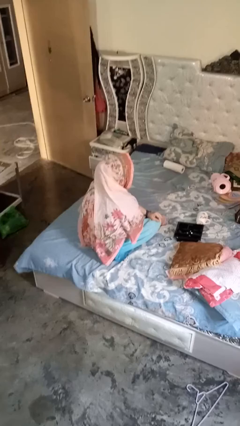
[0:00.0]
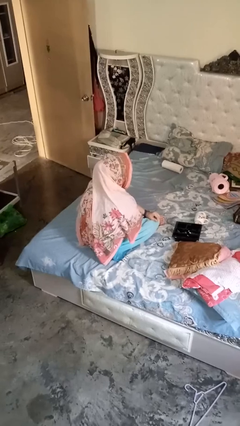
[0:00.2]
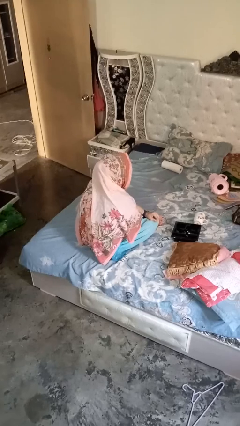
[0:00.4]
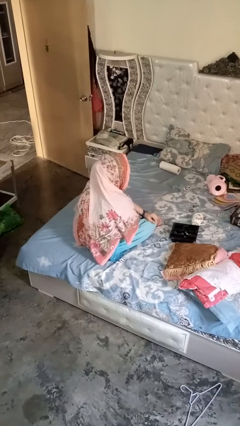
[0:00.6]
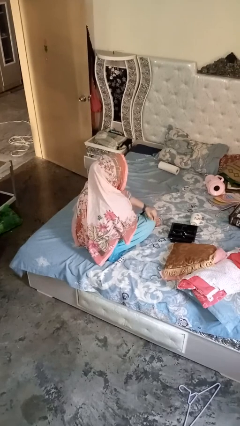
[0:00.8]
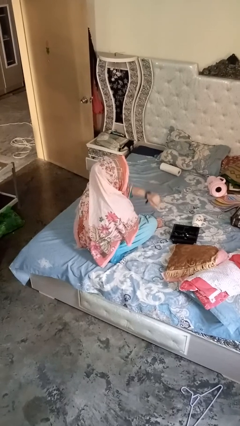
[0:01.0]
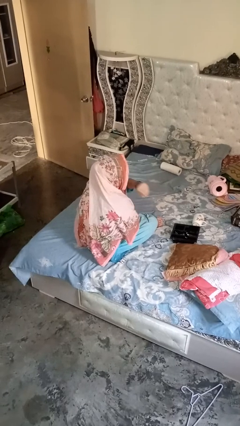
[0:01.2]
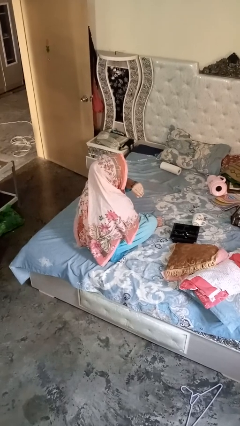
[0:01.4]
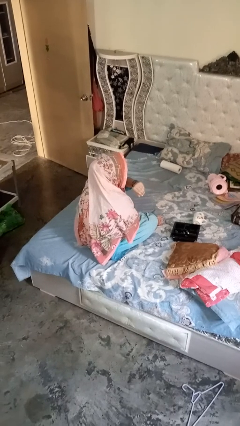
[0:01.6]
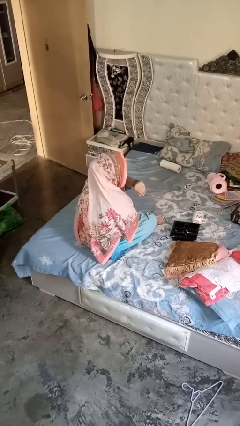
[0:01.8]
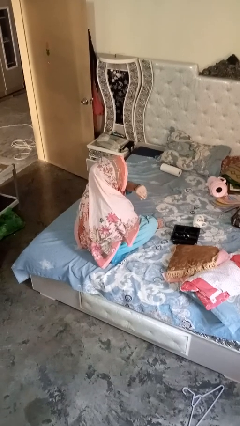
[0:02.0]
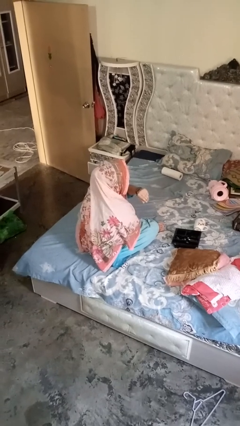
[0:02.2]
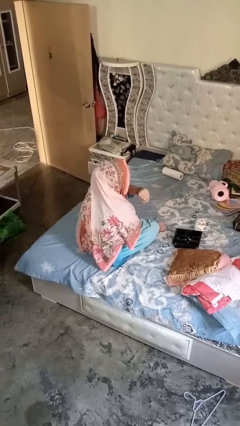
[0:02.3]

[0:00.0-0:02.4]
person gestures watch closely

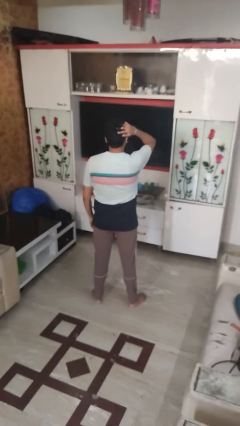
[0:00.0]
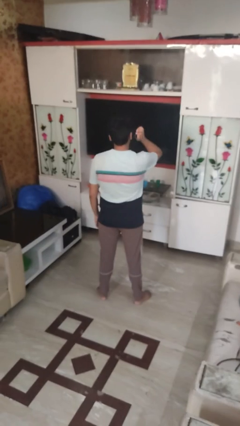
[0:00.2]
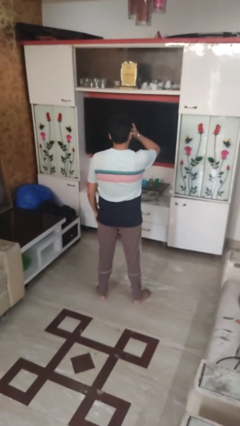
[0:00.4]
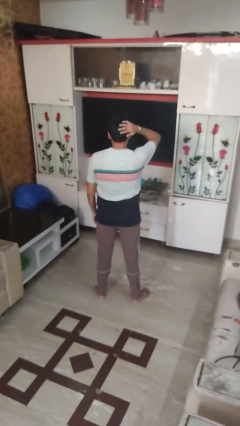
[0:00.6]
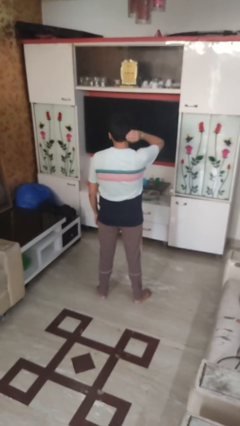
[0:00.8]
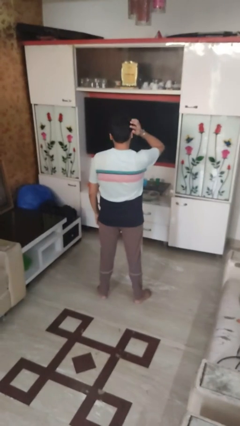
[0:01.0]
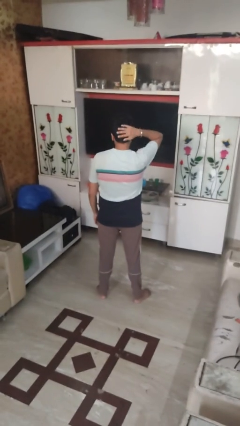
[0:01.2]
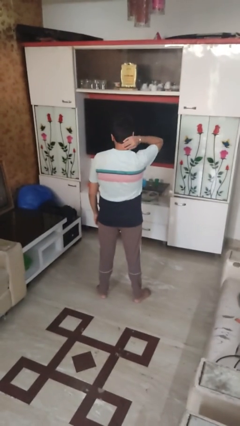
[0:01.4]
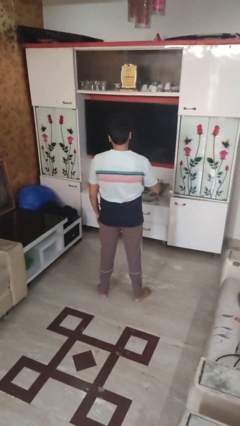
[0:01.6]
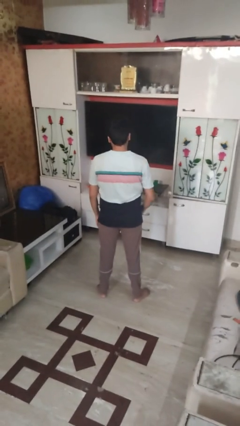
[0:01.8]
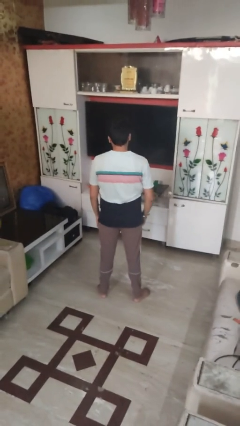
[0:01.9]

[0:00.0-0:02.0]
person strokes hair

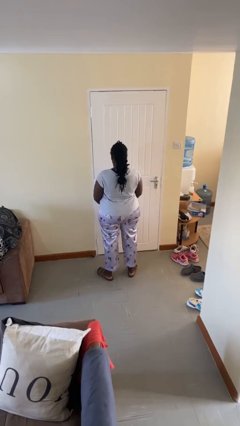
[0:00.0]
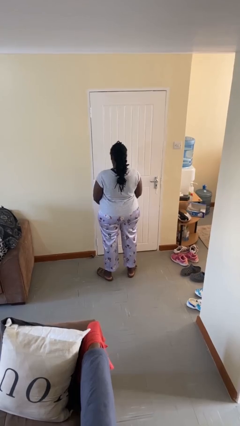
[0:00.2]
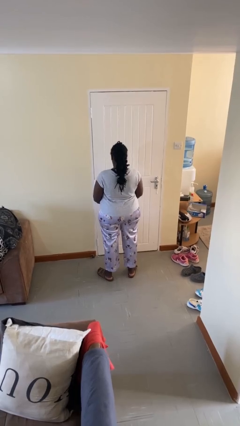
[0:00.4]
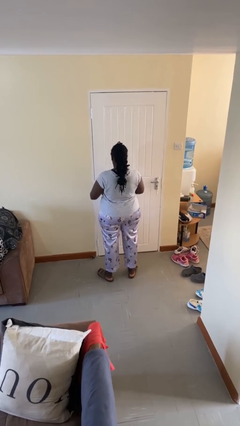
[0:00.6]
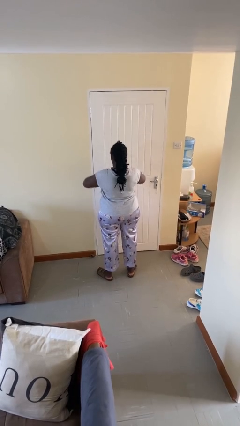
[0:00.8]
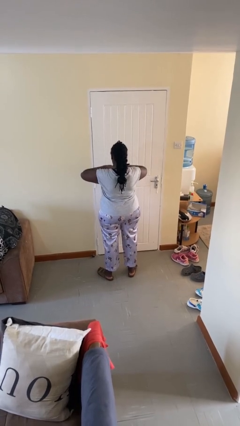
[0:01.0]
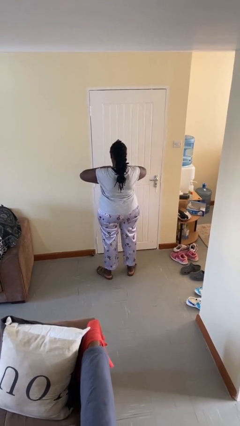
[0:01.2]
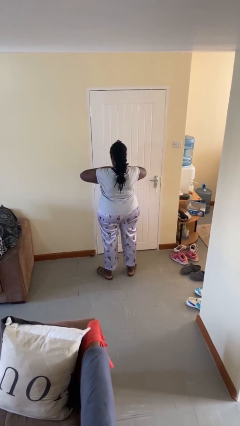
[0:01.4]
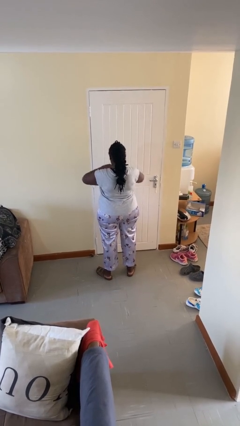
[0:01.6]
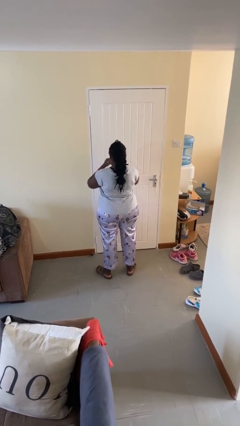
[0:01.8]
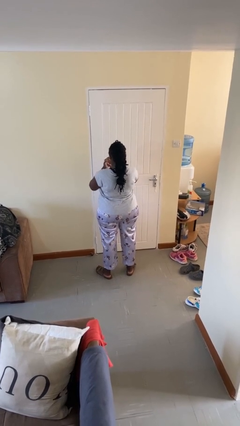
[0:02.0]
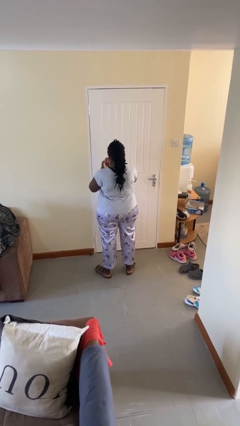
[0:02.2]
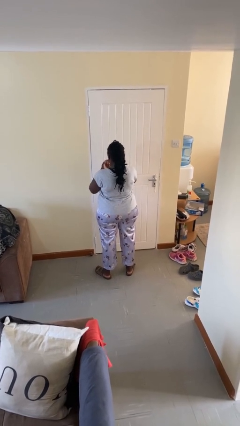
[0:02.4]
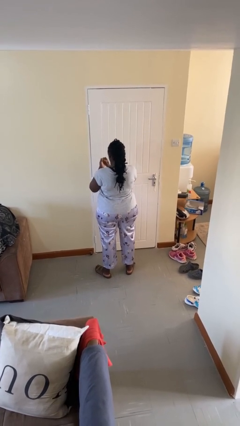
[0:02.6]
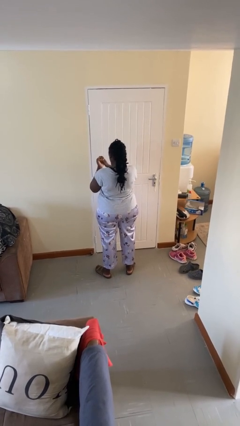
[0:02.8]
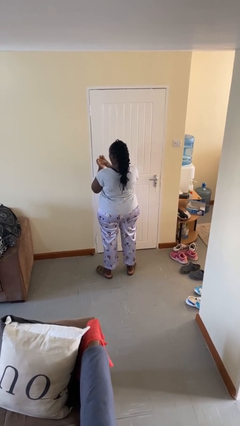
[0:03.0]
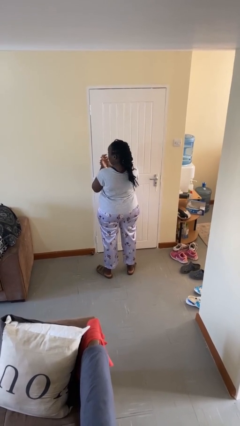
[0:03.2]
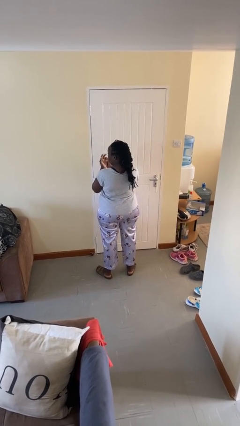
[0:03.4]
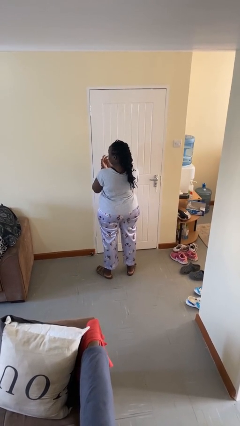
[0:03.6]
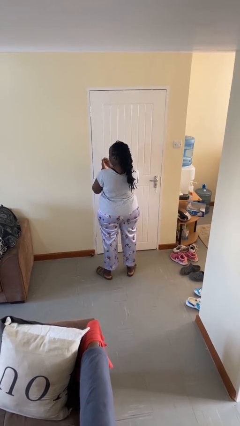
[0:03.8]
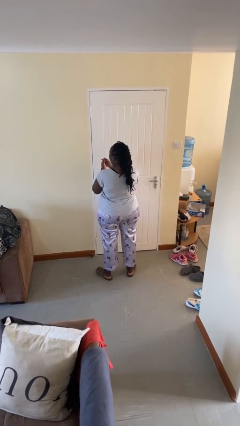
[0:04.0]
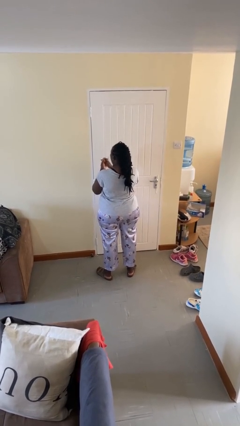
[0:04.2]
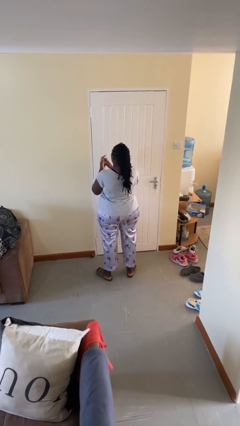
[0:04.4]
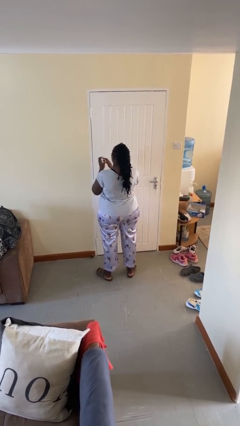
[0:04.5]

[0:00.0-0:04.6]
person cracks knuckles

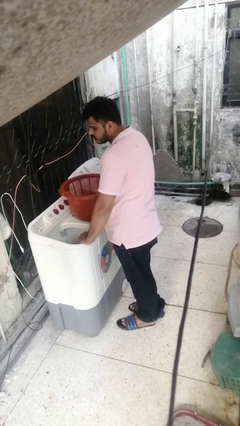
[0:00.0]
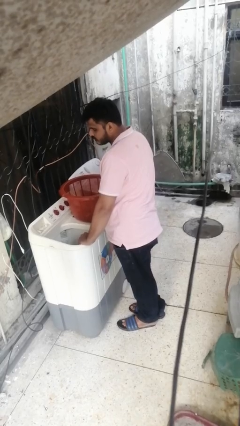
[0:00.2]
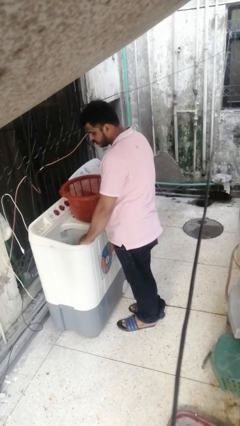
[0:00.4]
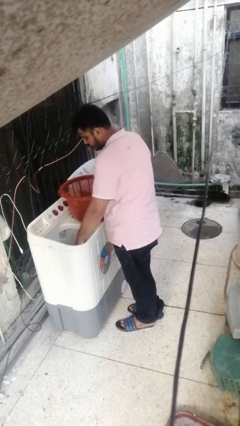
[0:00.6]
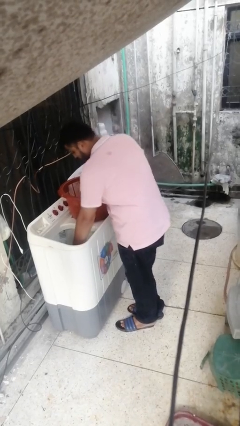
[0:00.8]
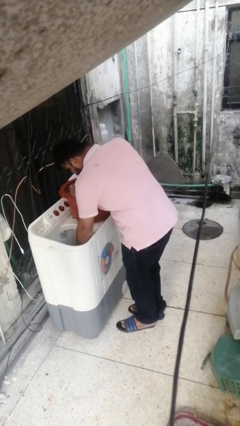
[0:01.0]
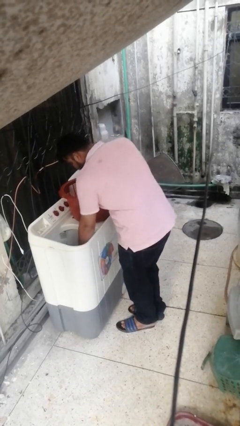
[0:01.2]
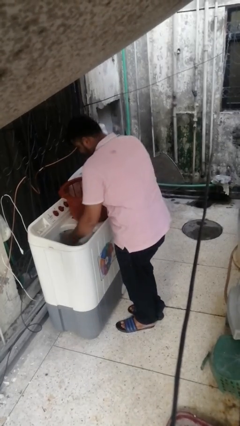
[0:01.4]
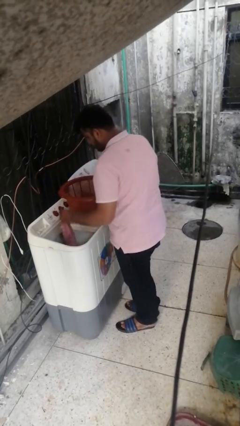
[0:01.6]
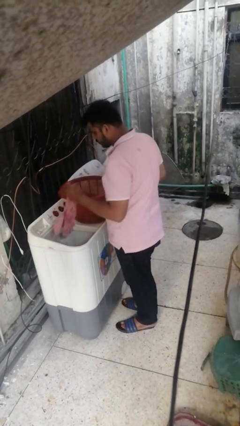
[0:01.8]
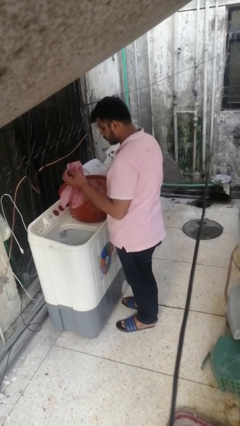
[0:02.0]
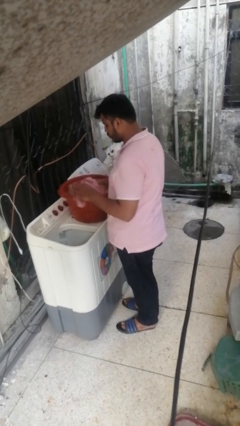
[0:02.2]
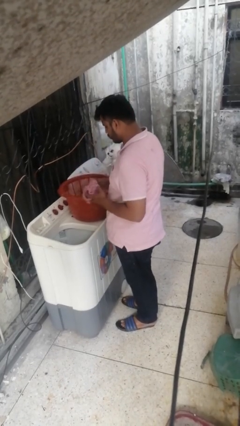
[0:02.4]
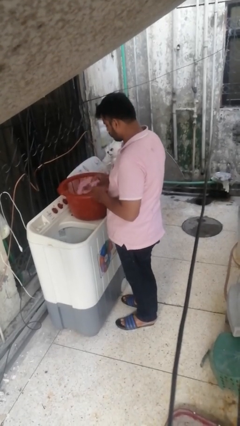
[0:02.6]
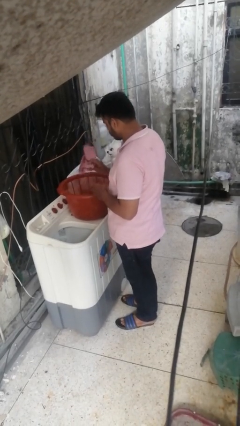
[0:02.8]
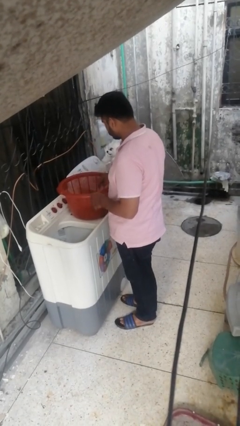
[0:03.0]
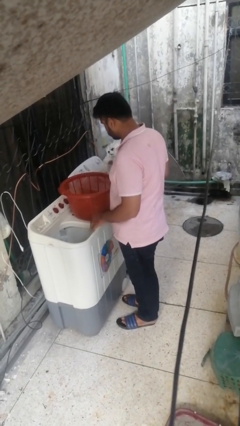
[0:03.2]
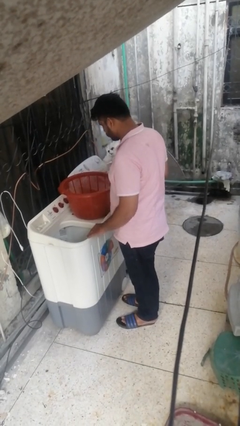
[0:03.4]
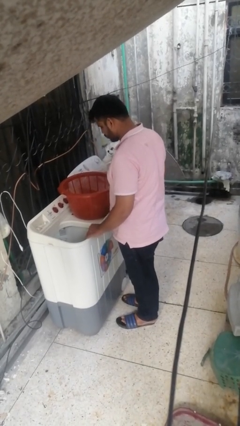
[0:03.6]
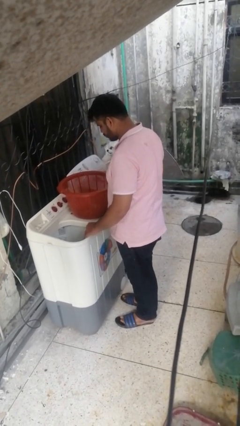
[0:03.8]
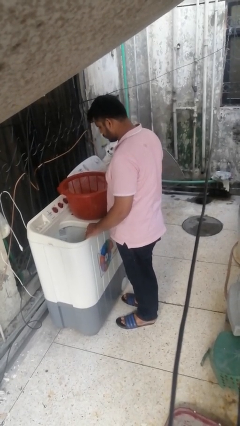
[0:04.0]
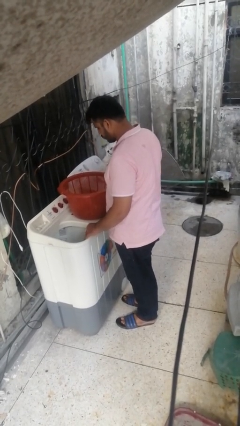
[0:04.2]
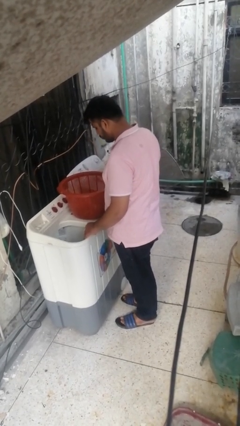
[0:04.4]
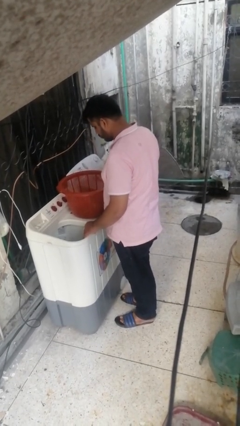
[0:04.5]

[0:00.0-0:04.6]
person unloads clotheswasher

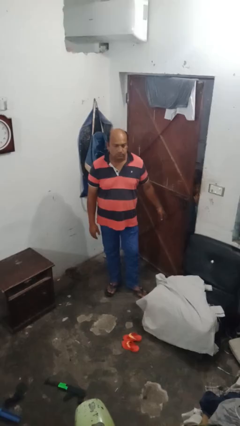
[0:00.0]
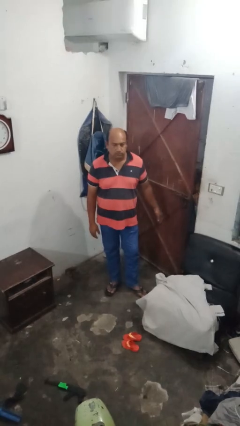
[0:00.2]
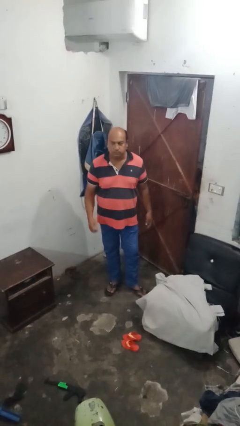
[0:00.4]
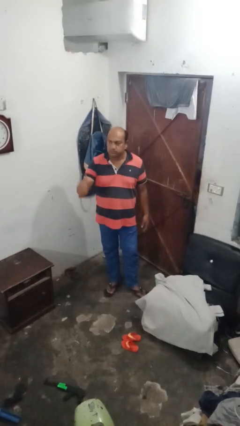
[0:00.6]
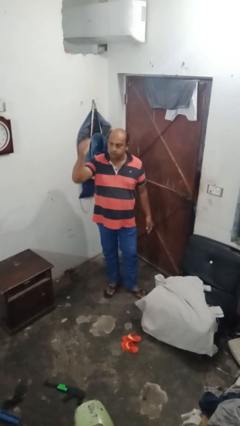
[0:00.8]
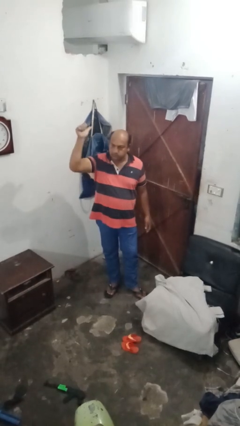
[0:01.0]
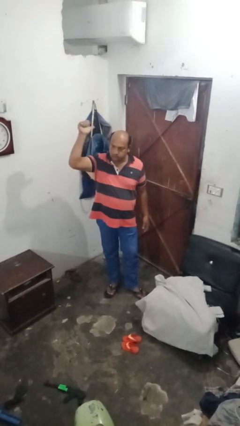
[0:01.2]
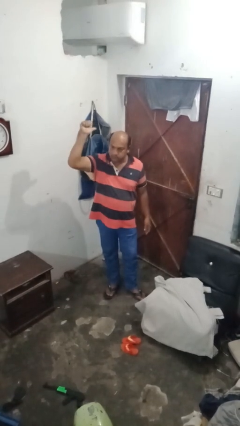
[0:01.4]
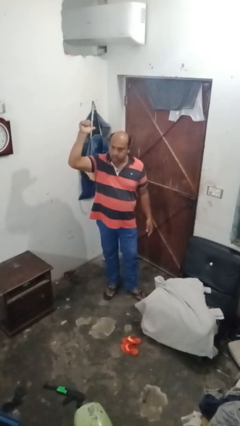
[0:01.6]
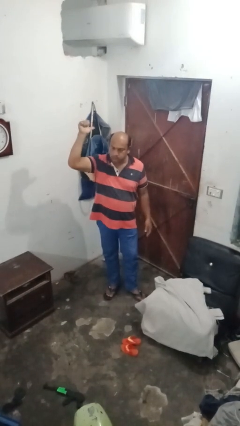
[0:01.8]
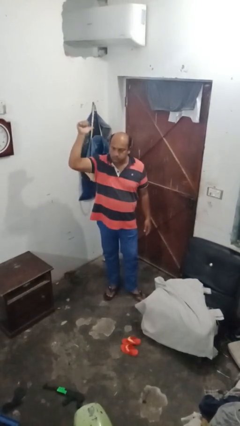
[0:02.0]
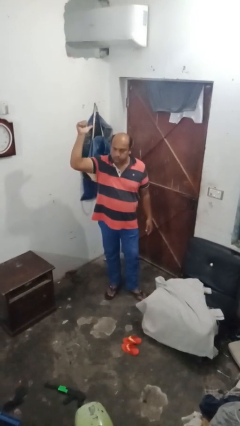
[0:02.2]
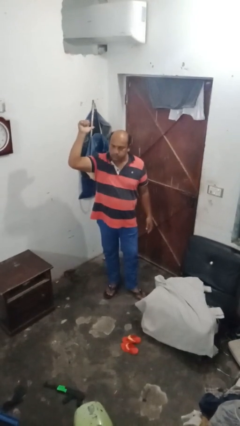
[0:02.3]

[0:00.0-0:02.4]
person gestures arms x

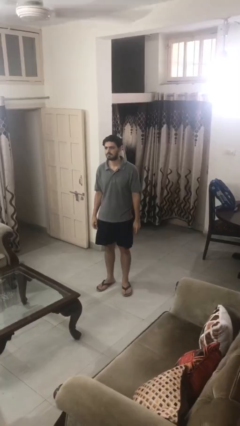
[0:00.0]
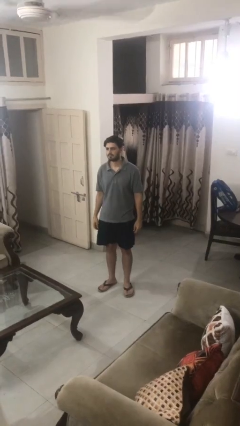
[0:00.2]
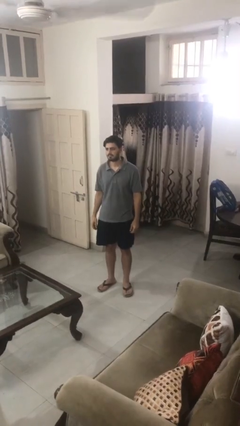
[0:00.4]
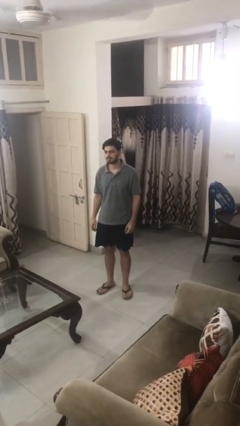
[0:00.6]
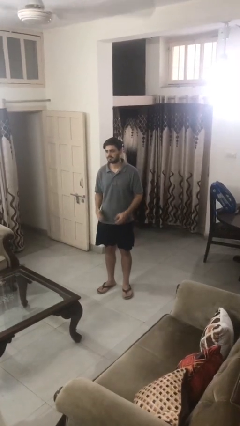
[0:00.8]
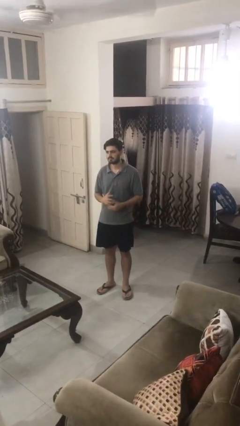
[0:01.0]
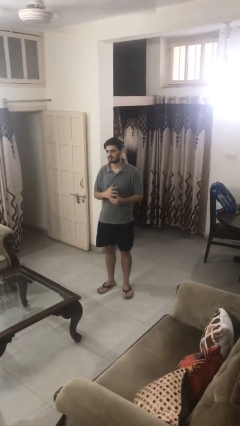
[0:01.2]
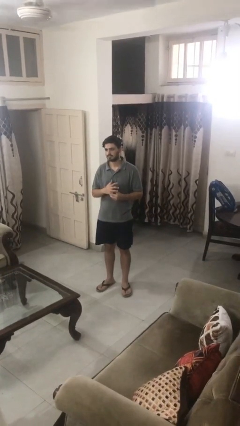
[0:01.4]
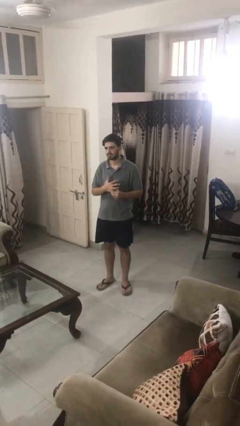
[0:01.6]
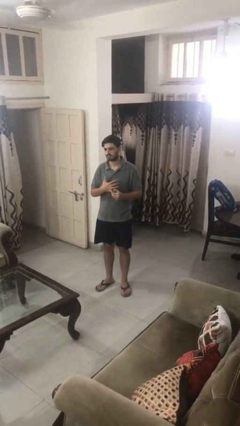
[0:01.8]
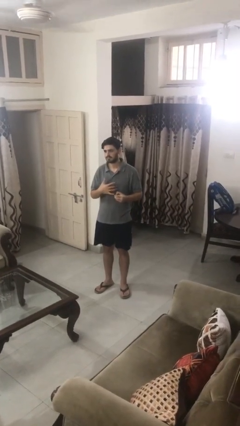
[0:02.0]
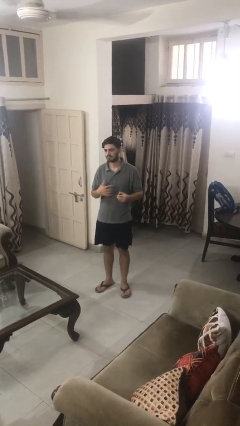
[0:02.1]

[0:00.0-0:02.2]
person takes off ring
